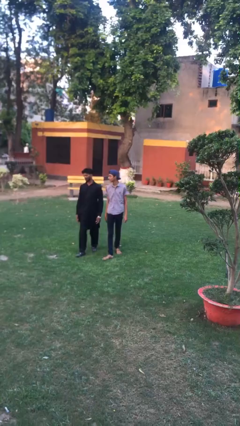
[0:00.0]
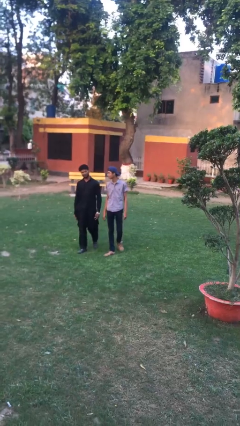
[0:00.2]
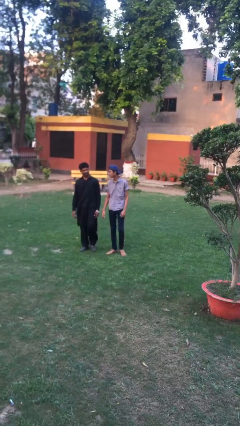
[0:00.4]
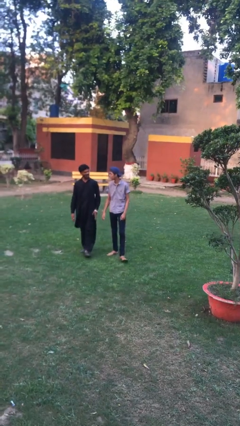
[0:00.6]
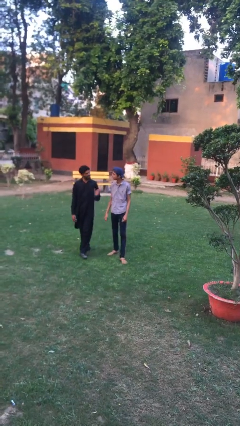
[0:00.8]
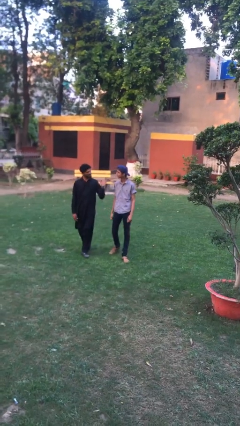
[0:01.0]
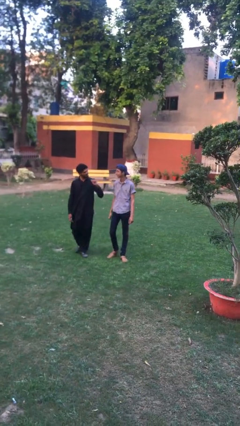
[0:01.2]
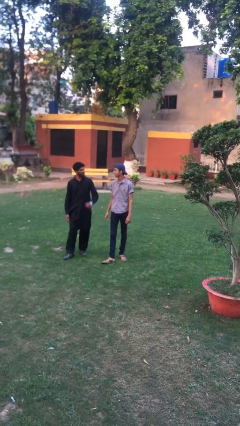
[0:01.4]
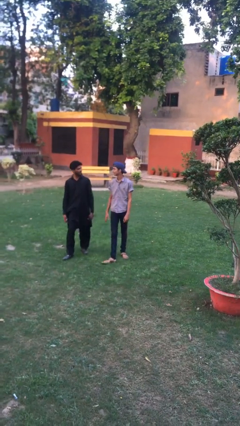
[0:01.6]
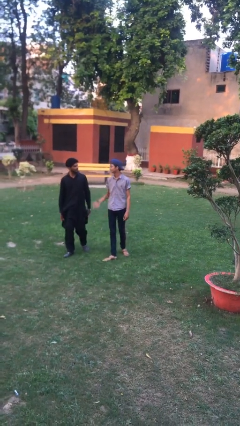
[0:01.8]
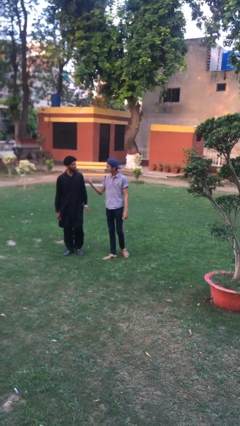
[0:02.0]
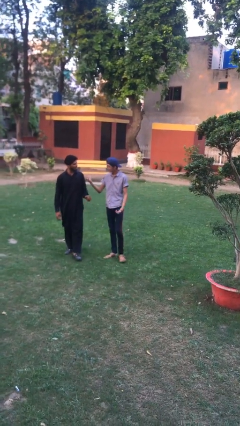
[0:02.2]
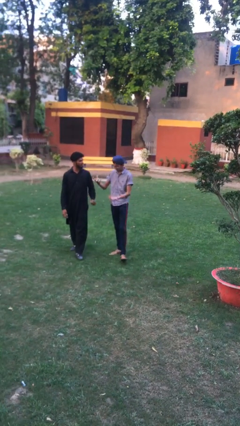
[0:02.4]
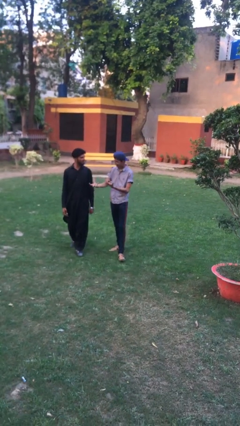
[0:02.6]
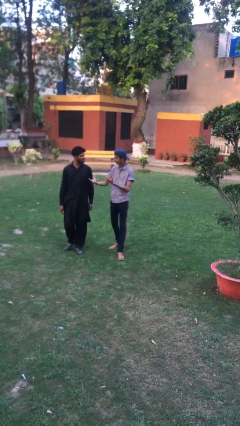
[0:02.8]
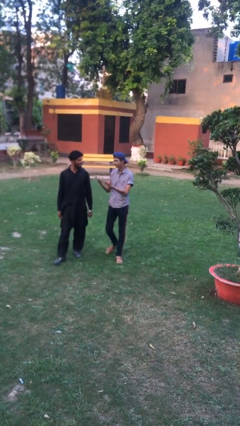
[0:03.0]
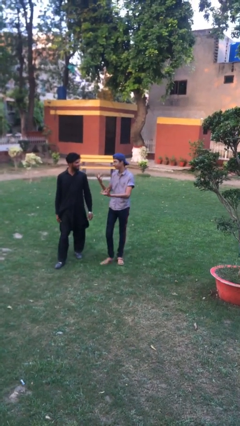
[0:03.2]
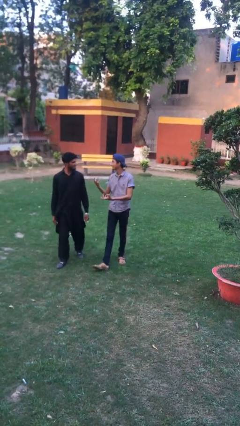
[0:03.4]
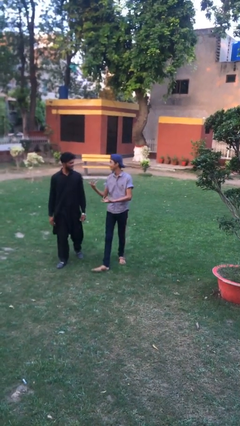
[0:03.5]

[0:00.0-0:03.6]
person talks to person

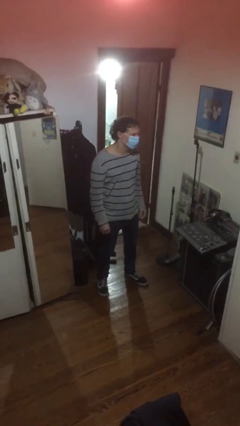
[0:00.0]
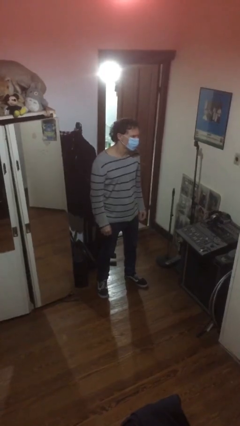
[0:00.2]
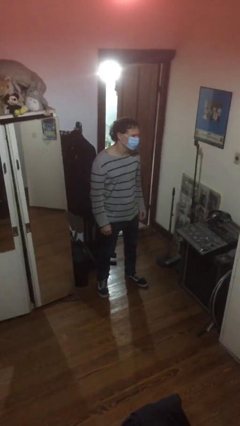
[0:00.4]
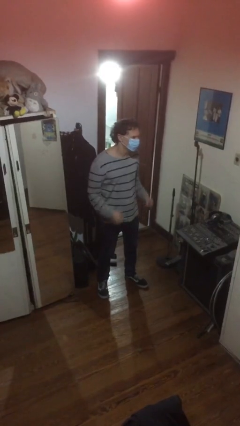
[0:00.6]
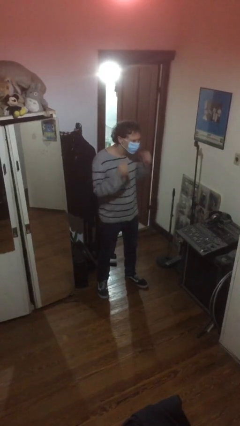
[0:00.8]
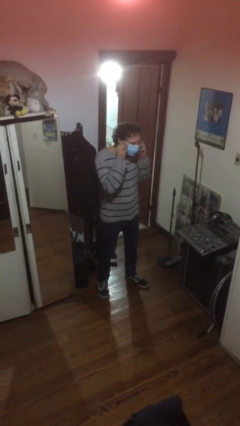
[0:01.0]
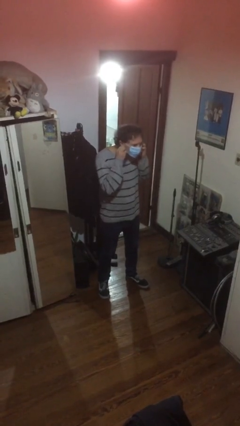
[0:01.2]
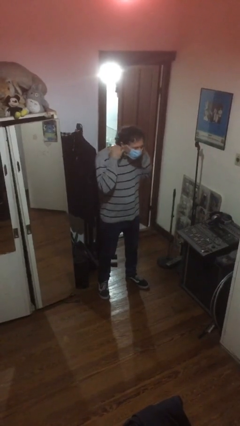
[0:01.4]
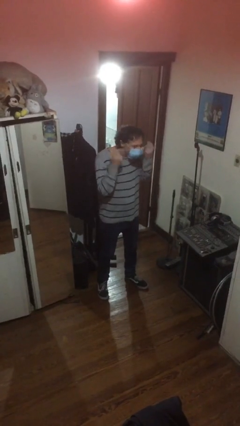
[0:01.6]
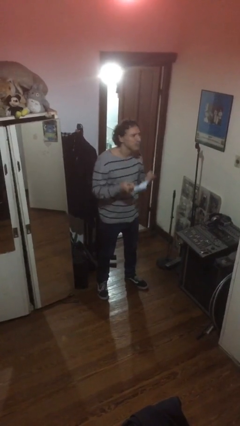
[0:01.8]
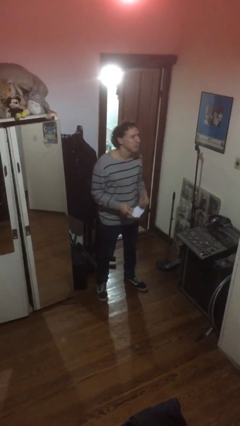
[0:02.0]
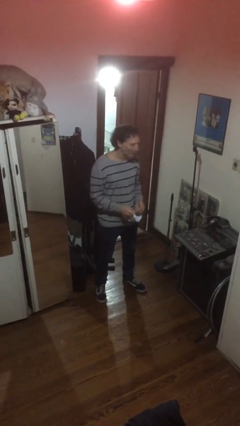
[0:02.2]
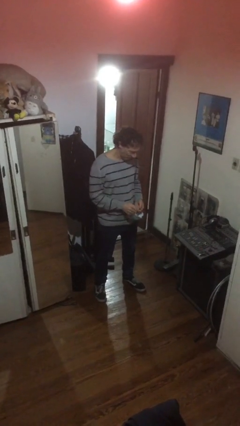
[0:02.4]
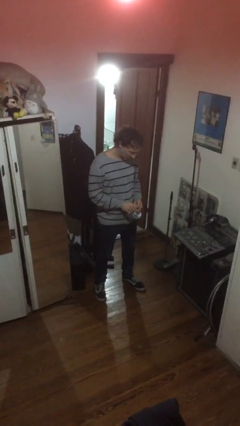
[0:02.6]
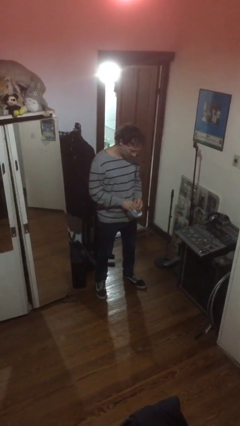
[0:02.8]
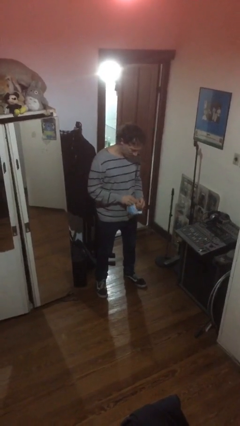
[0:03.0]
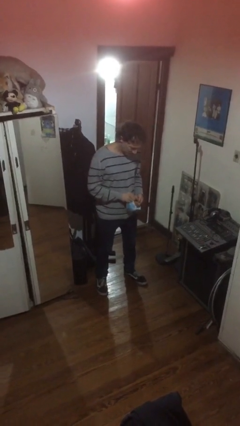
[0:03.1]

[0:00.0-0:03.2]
person takes off facemask

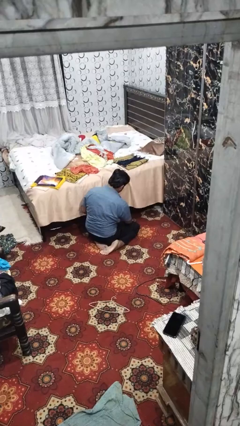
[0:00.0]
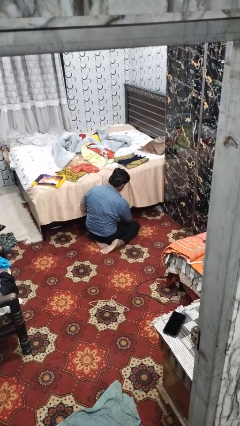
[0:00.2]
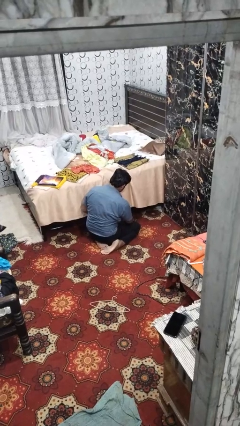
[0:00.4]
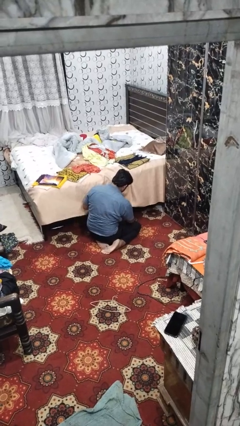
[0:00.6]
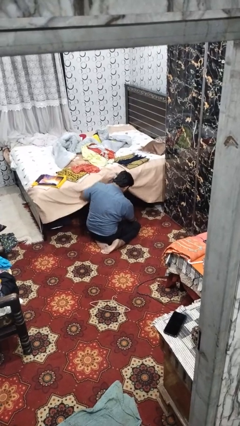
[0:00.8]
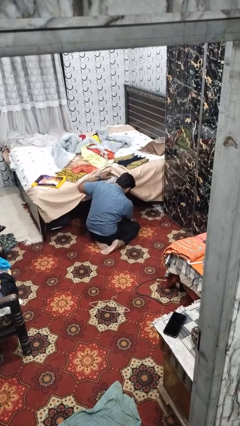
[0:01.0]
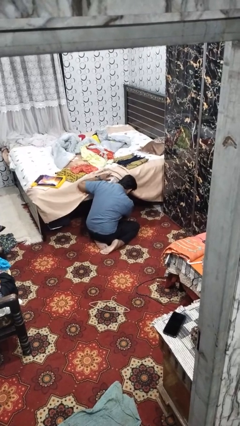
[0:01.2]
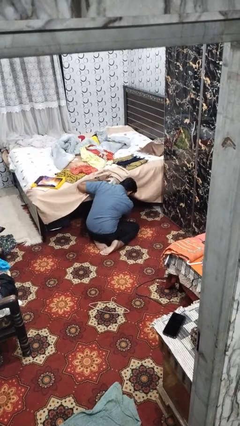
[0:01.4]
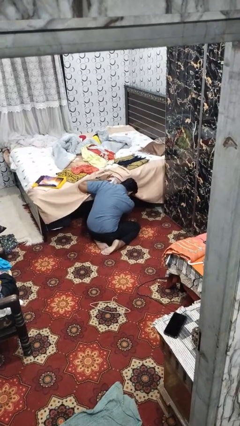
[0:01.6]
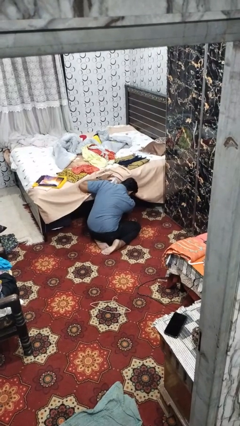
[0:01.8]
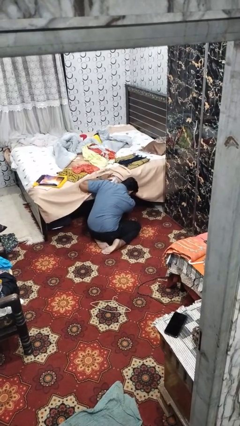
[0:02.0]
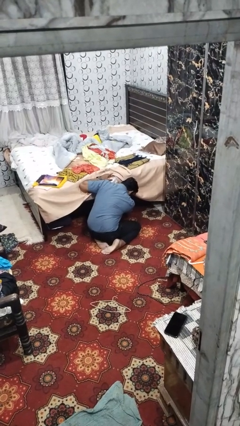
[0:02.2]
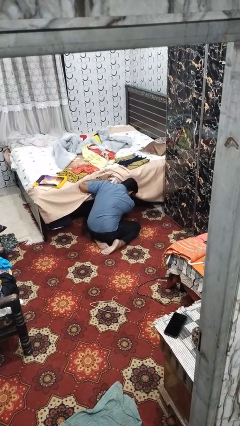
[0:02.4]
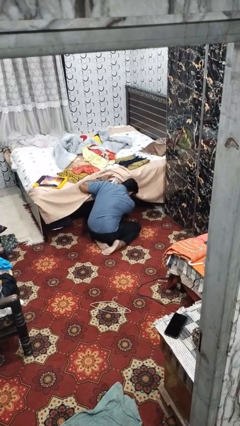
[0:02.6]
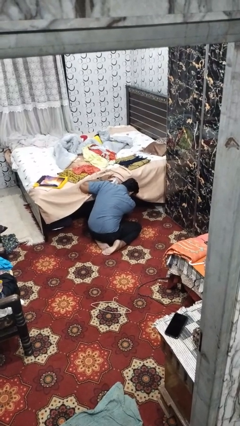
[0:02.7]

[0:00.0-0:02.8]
person searches under bed

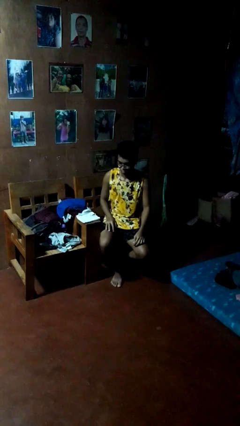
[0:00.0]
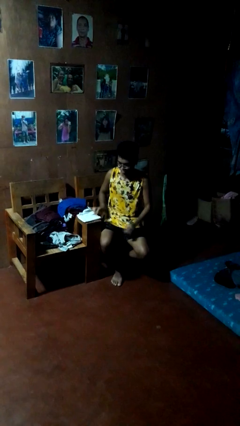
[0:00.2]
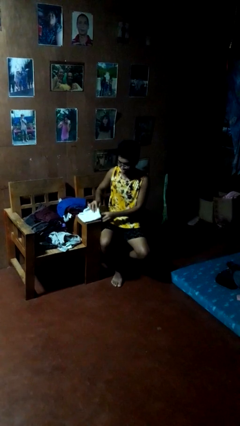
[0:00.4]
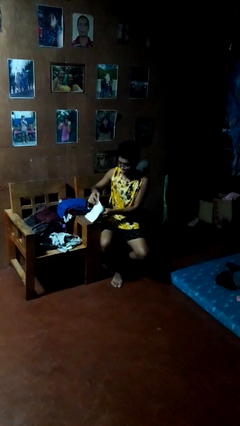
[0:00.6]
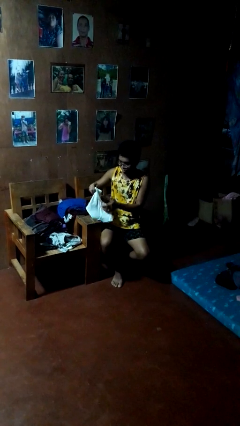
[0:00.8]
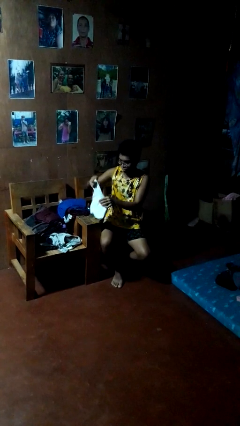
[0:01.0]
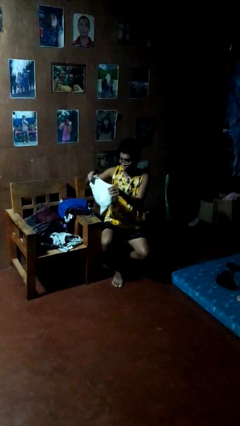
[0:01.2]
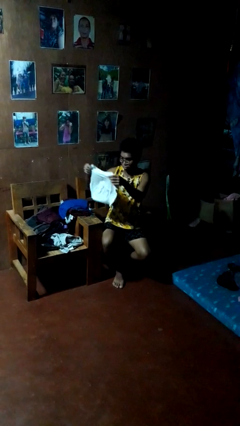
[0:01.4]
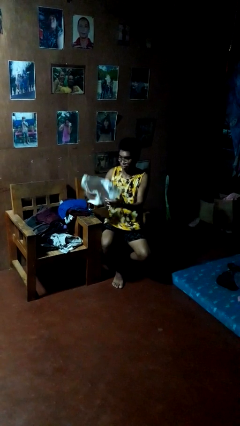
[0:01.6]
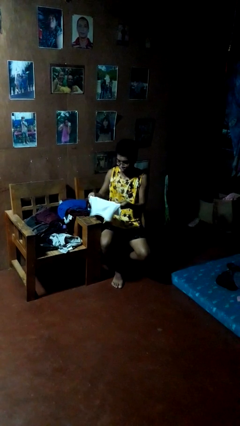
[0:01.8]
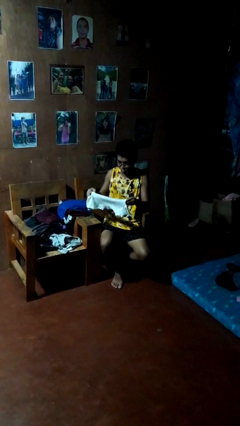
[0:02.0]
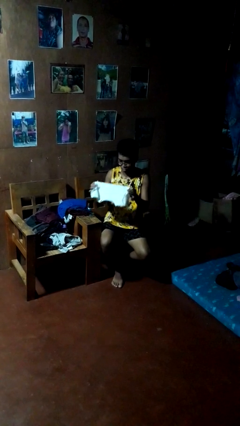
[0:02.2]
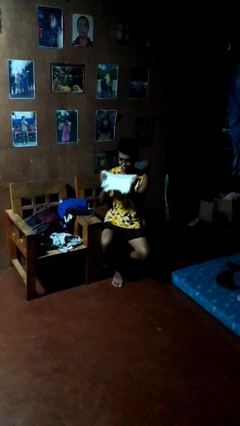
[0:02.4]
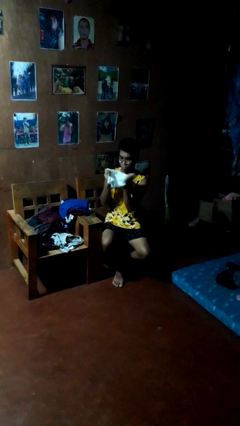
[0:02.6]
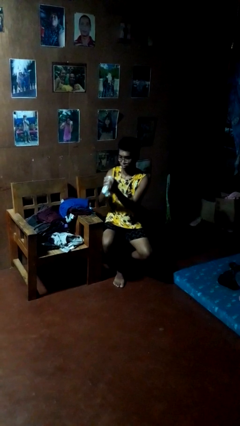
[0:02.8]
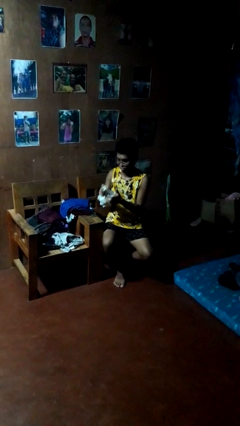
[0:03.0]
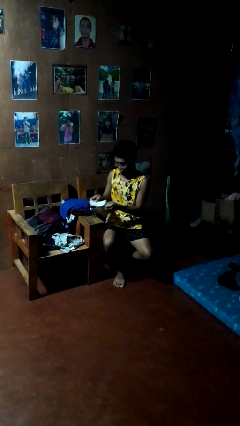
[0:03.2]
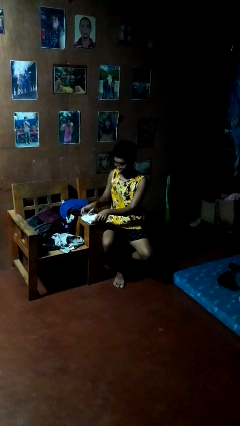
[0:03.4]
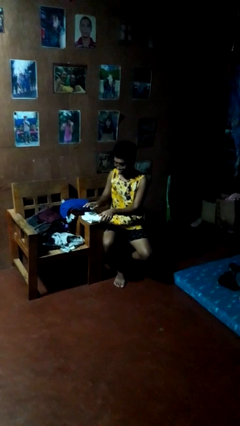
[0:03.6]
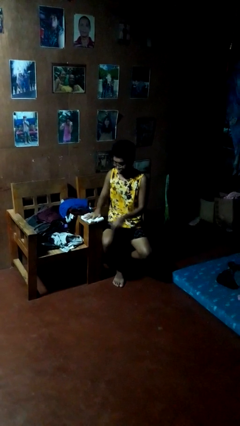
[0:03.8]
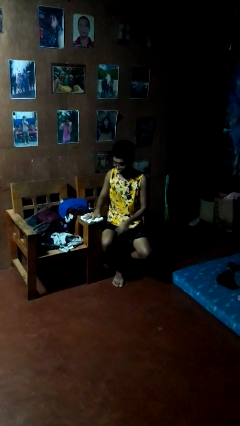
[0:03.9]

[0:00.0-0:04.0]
person folds shirt

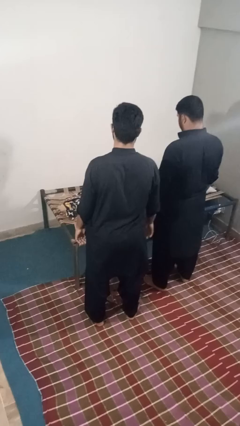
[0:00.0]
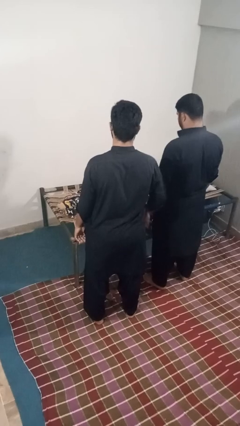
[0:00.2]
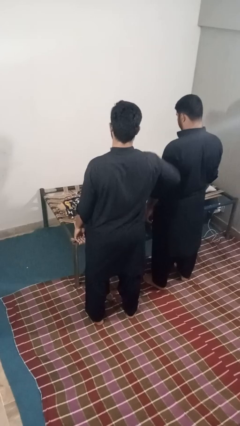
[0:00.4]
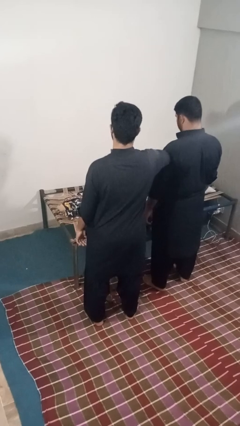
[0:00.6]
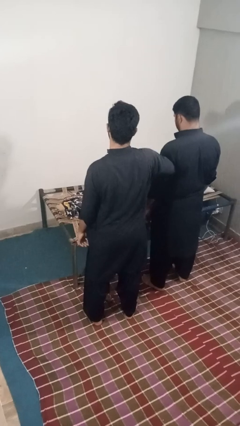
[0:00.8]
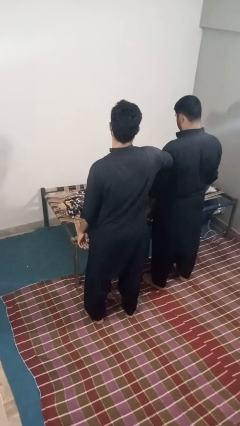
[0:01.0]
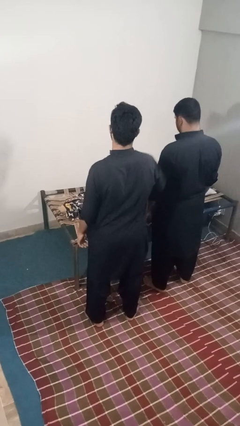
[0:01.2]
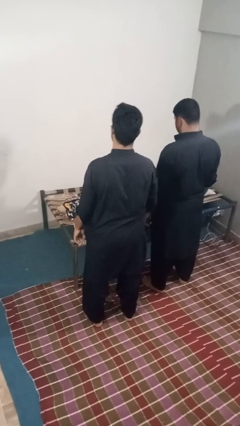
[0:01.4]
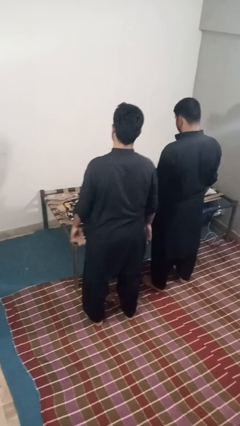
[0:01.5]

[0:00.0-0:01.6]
person nudges person with elbow

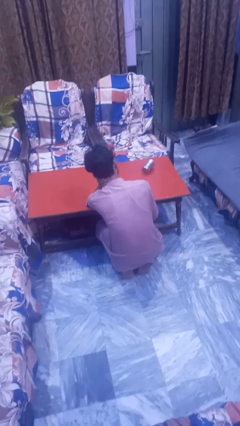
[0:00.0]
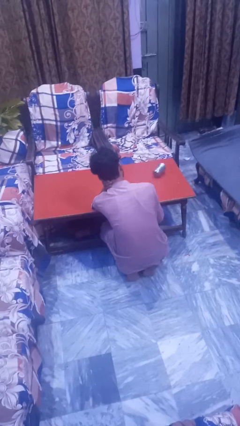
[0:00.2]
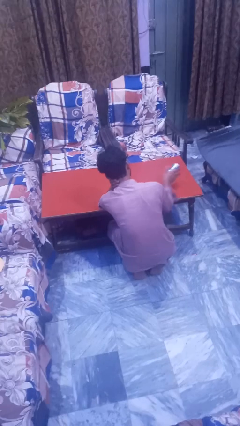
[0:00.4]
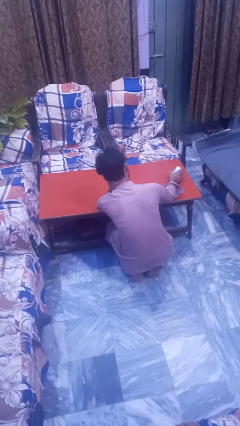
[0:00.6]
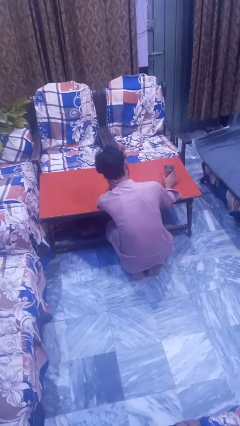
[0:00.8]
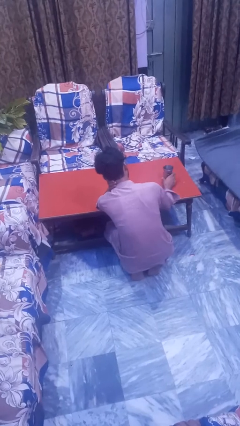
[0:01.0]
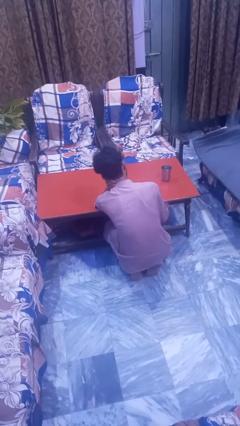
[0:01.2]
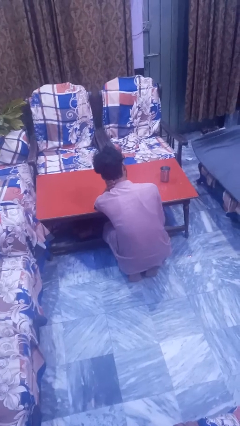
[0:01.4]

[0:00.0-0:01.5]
person sets upright glass

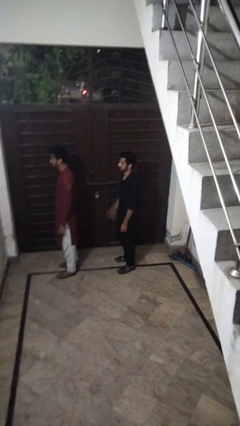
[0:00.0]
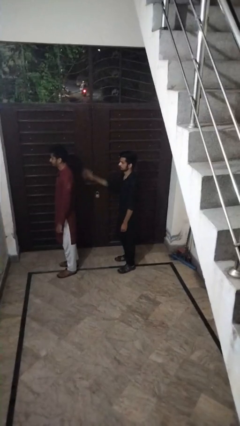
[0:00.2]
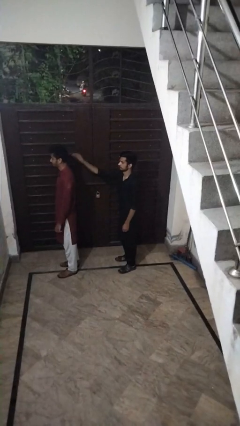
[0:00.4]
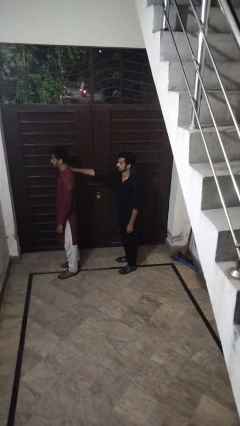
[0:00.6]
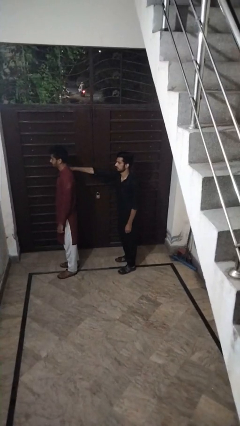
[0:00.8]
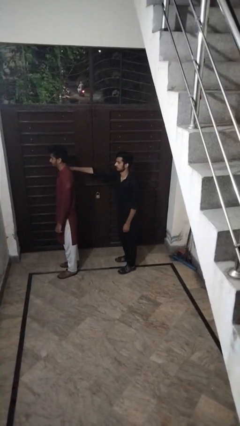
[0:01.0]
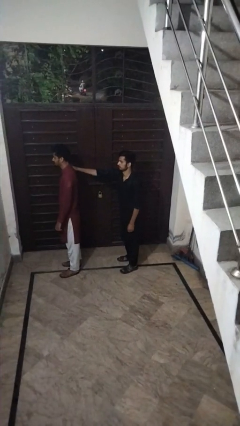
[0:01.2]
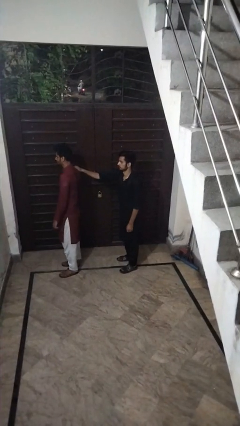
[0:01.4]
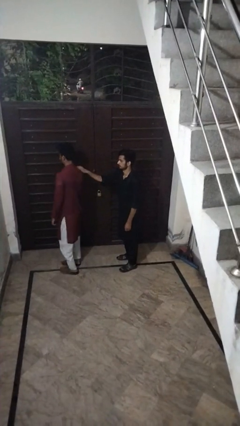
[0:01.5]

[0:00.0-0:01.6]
person grabs person by shoulder
